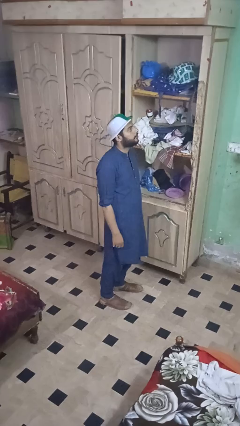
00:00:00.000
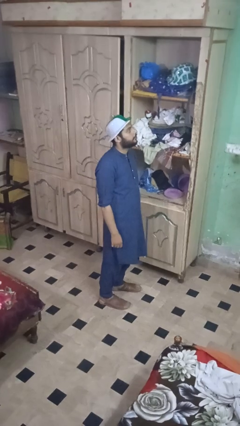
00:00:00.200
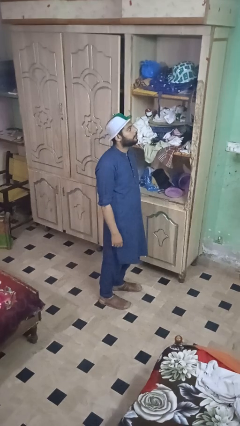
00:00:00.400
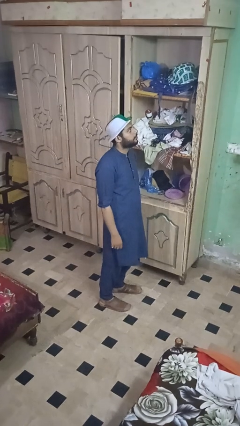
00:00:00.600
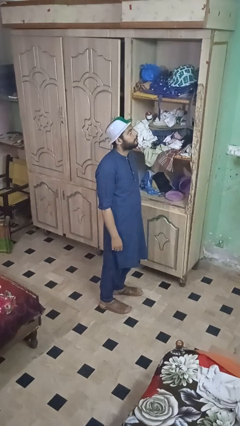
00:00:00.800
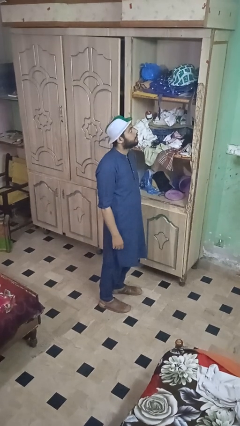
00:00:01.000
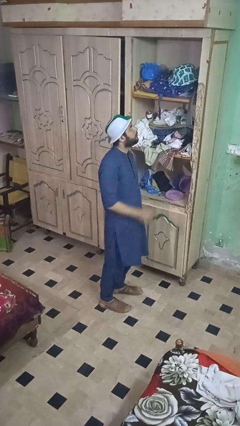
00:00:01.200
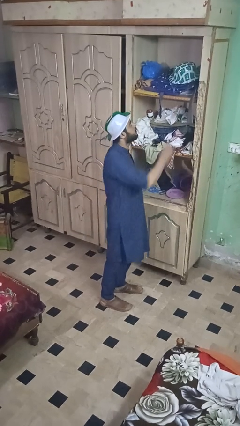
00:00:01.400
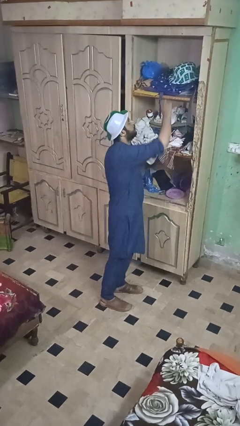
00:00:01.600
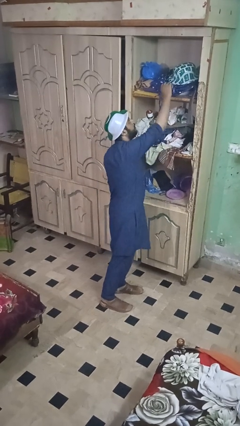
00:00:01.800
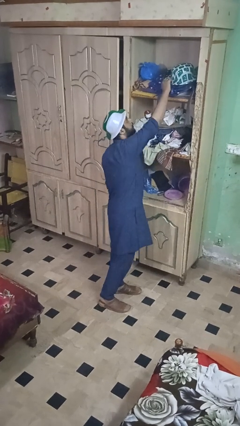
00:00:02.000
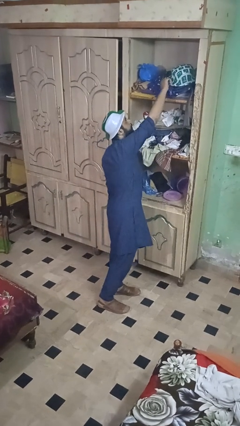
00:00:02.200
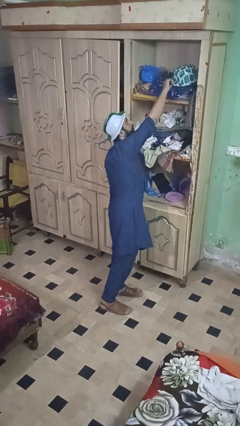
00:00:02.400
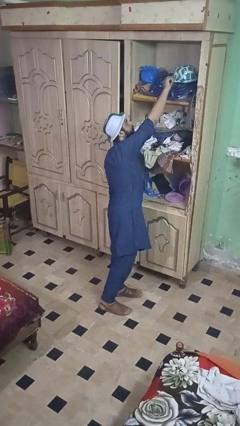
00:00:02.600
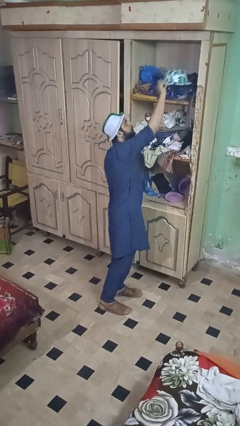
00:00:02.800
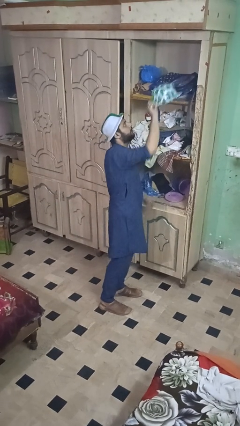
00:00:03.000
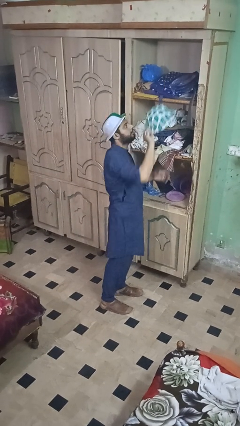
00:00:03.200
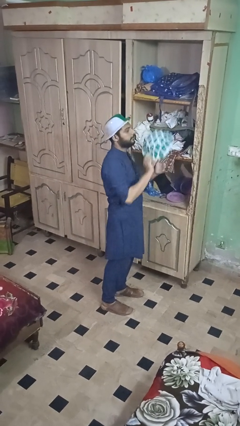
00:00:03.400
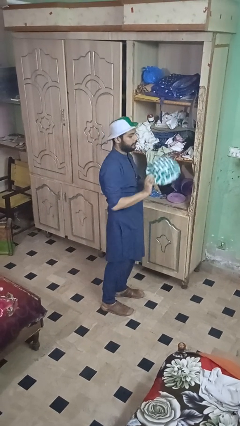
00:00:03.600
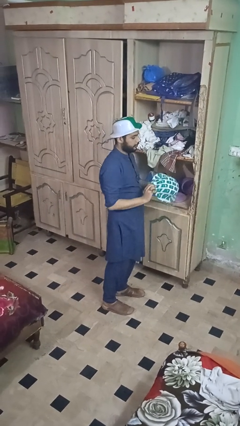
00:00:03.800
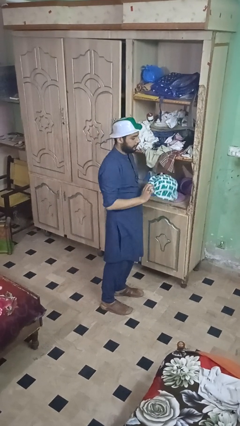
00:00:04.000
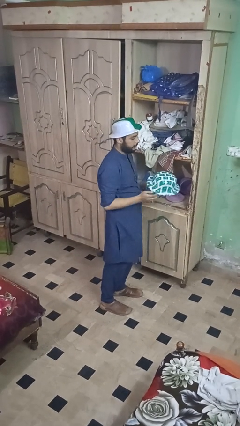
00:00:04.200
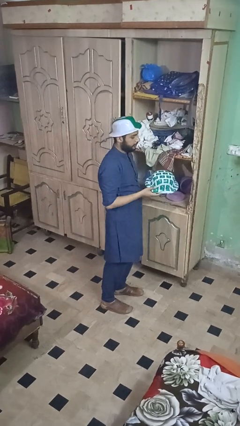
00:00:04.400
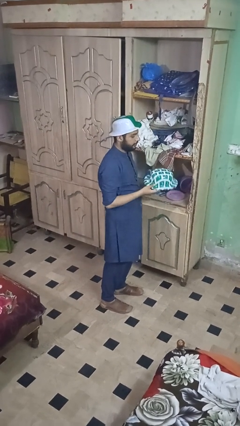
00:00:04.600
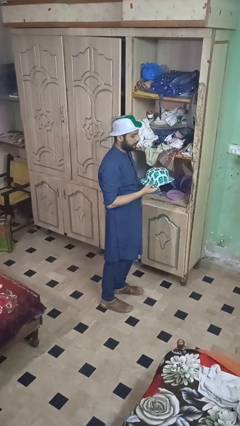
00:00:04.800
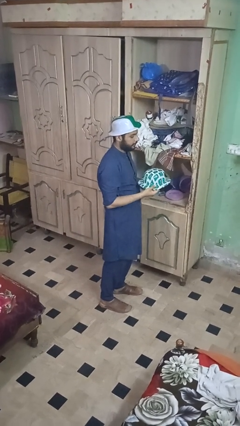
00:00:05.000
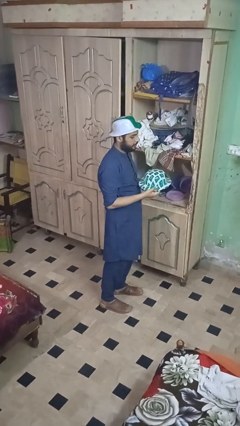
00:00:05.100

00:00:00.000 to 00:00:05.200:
person picks up object from shelf

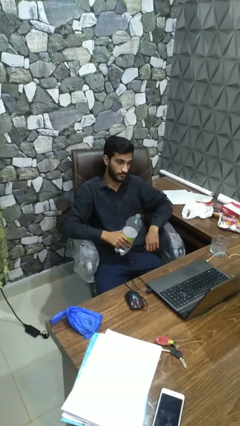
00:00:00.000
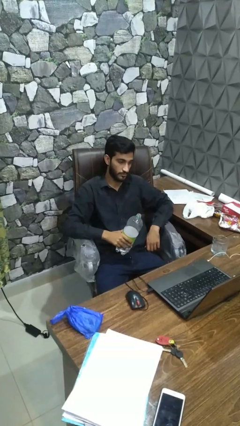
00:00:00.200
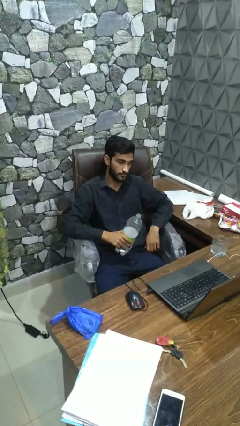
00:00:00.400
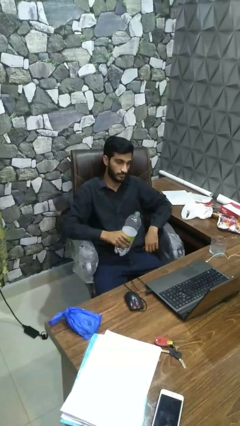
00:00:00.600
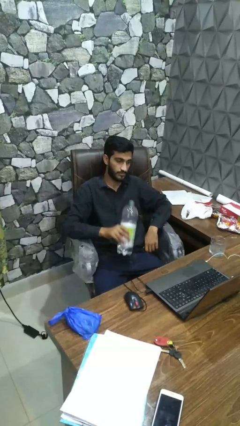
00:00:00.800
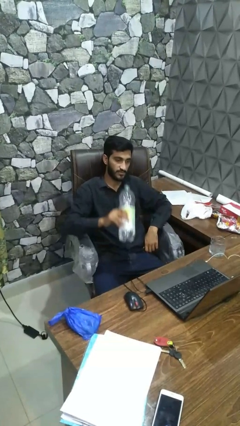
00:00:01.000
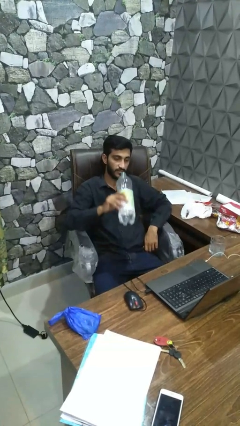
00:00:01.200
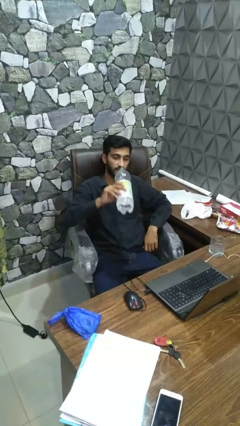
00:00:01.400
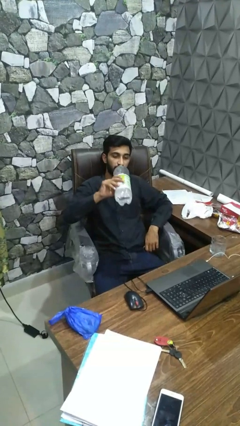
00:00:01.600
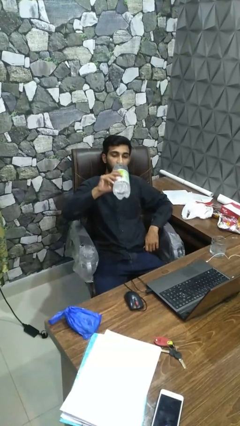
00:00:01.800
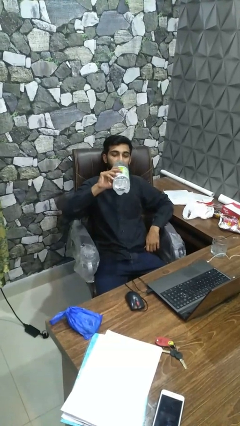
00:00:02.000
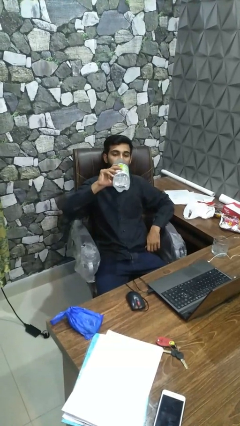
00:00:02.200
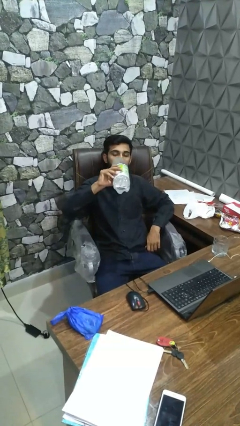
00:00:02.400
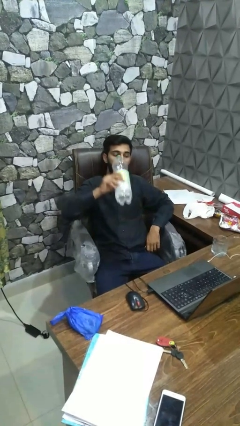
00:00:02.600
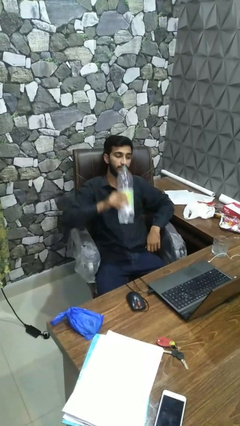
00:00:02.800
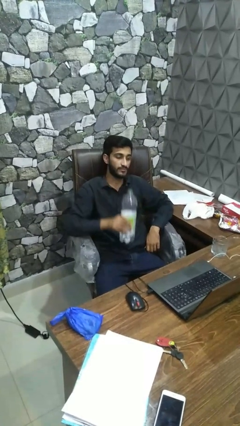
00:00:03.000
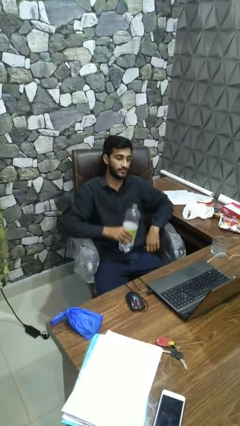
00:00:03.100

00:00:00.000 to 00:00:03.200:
person drinks from bottle

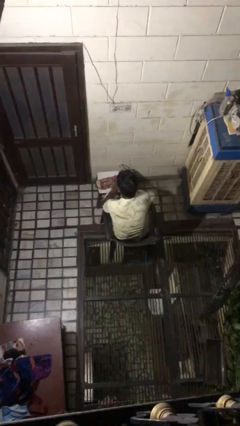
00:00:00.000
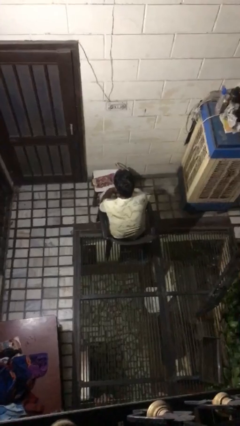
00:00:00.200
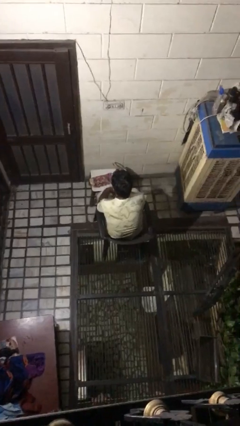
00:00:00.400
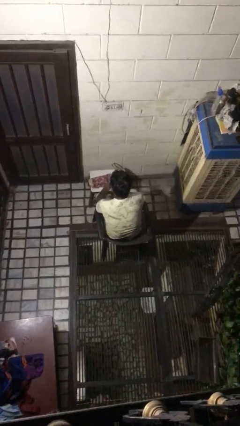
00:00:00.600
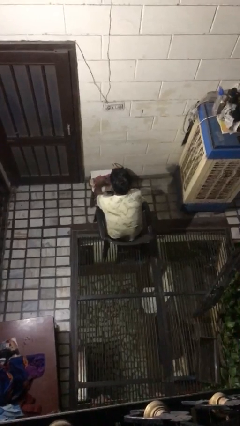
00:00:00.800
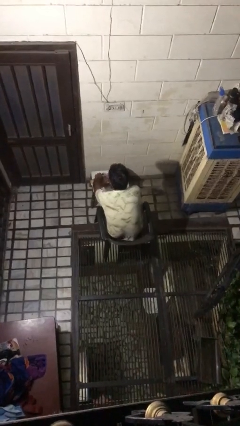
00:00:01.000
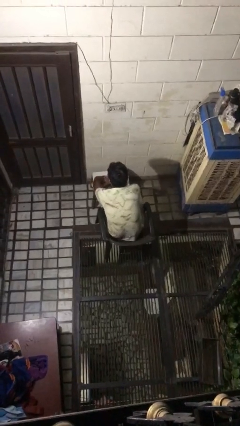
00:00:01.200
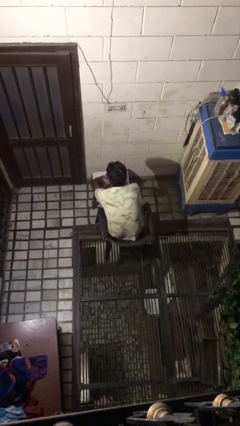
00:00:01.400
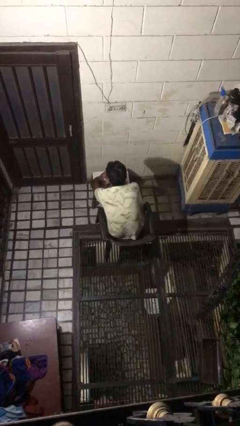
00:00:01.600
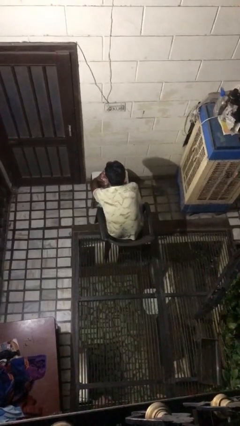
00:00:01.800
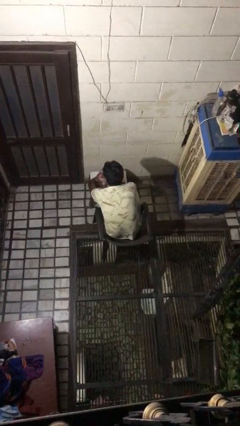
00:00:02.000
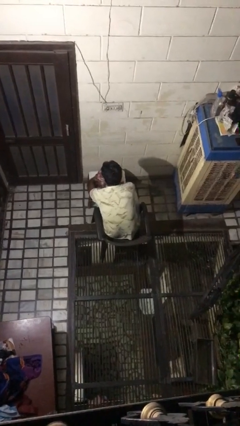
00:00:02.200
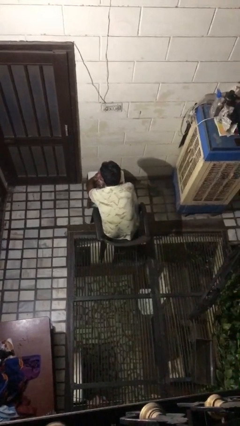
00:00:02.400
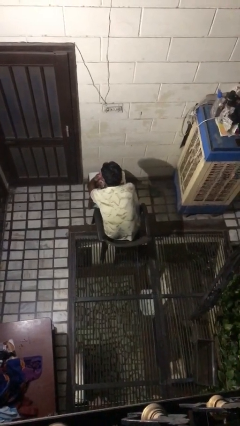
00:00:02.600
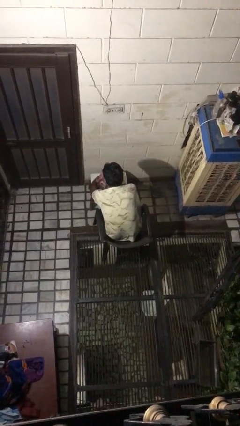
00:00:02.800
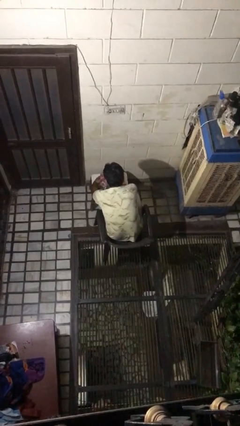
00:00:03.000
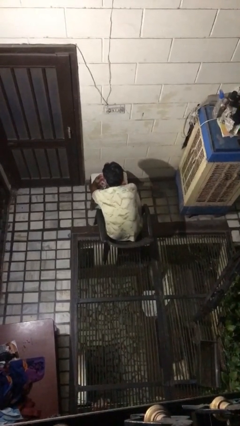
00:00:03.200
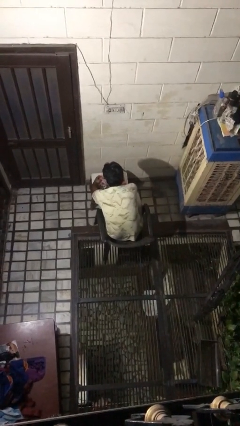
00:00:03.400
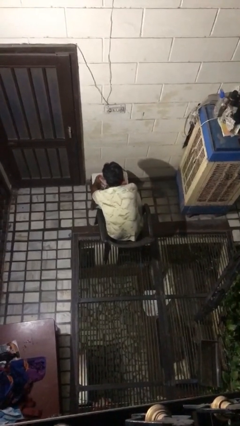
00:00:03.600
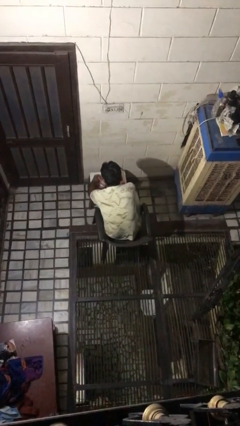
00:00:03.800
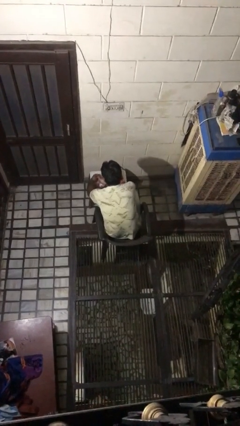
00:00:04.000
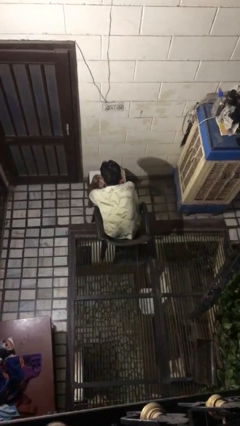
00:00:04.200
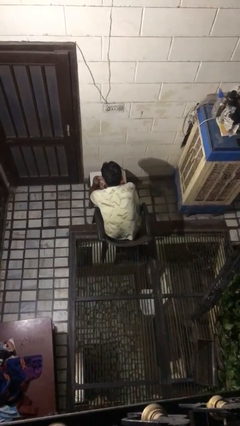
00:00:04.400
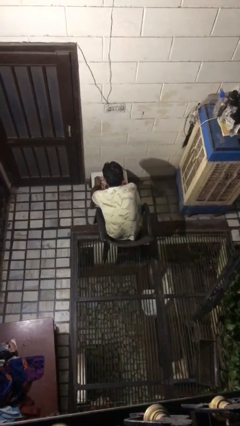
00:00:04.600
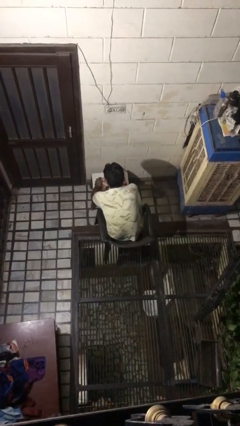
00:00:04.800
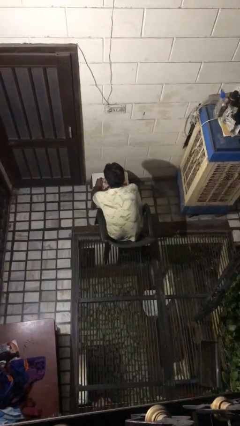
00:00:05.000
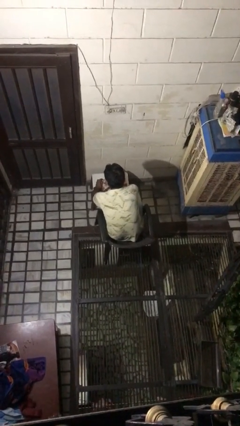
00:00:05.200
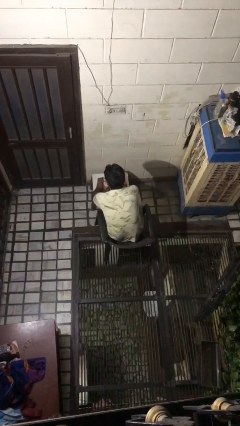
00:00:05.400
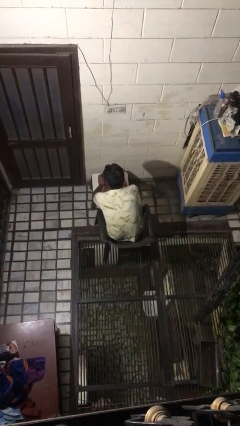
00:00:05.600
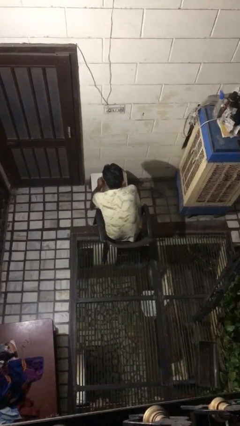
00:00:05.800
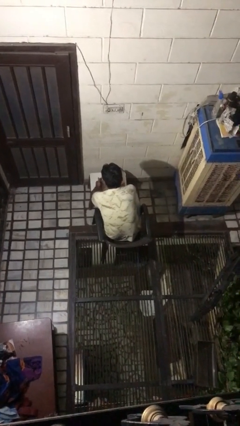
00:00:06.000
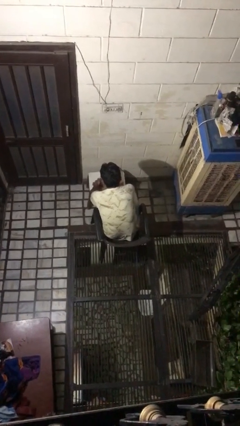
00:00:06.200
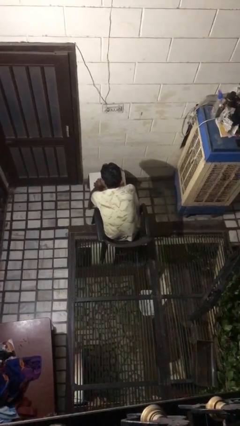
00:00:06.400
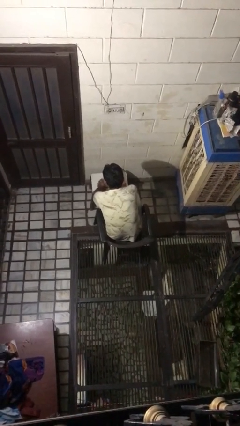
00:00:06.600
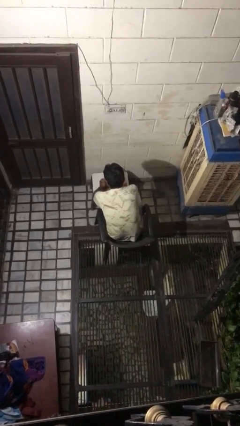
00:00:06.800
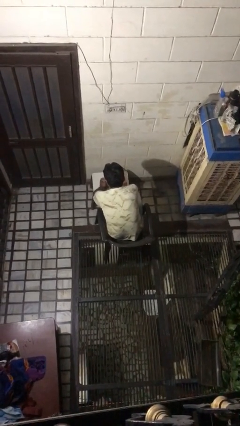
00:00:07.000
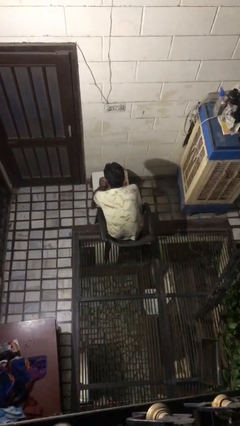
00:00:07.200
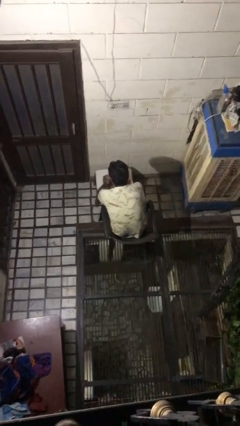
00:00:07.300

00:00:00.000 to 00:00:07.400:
person wraps box

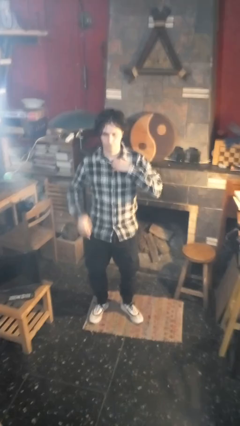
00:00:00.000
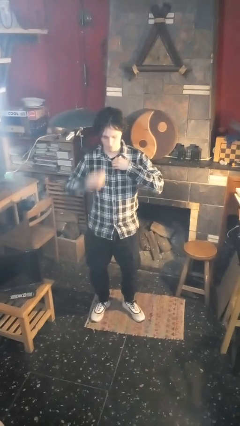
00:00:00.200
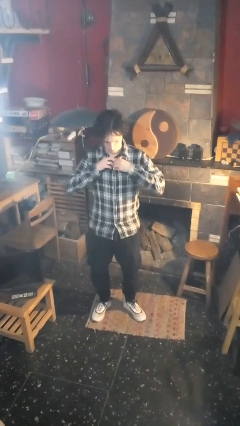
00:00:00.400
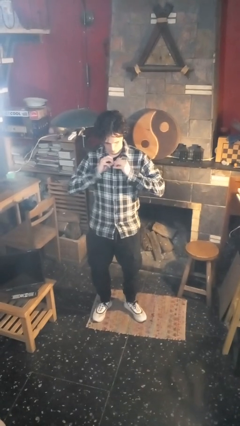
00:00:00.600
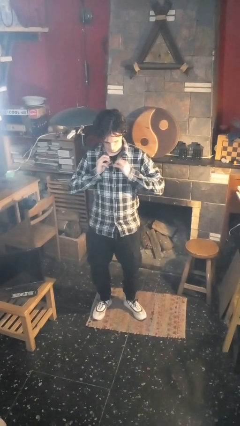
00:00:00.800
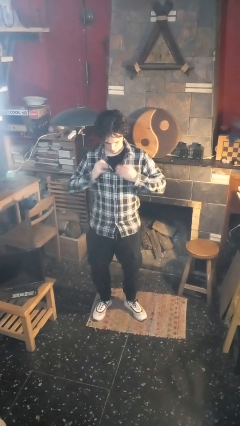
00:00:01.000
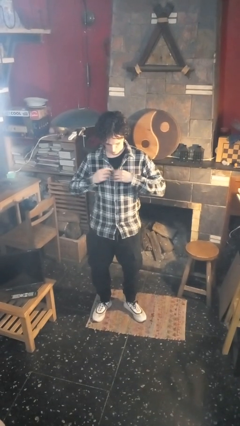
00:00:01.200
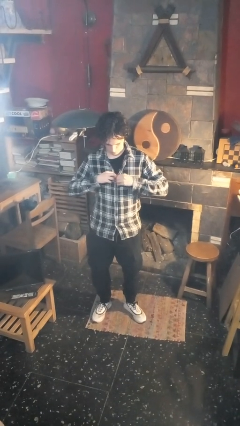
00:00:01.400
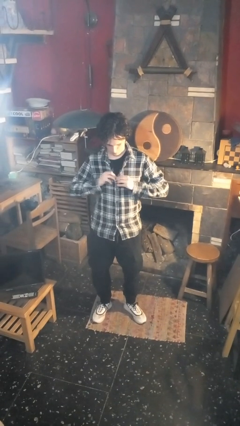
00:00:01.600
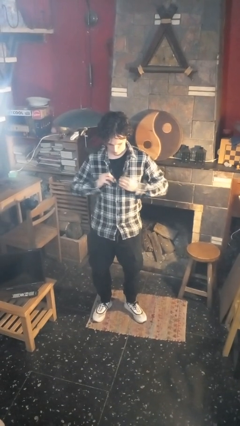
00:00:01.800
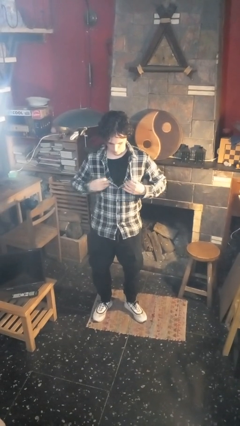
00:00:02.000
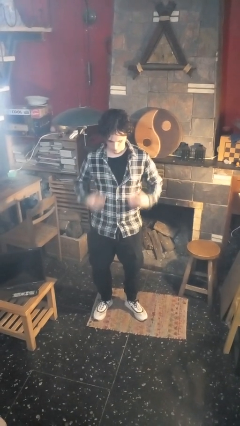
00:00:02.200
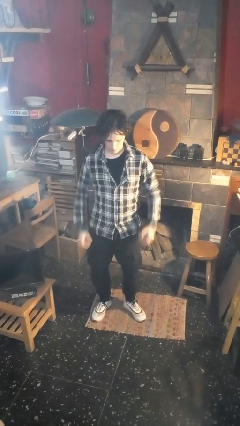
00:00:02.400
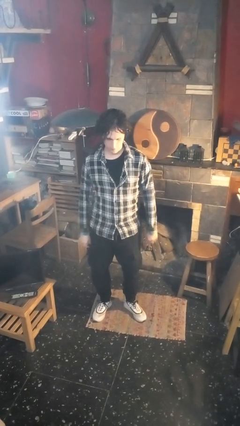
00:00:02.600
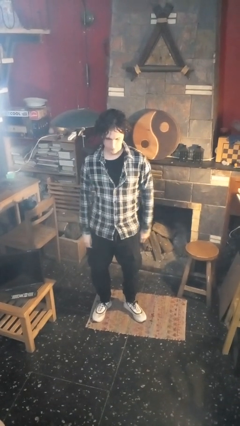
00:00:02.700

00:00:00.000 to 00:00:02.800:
person unbuttons shirt
